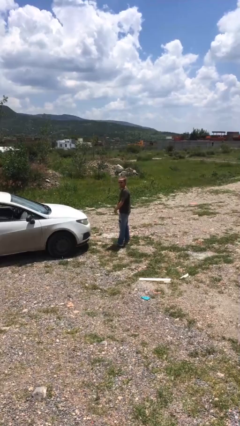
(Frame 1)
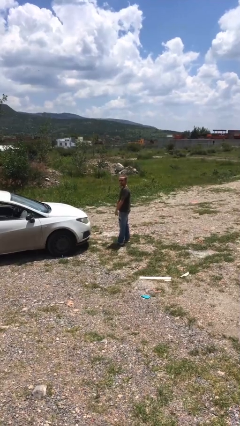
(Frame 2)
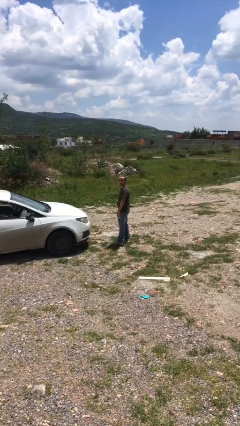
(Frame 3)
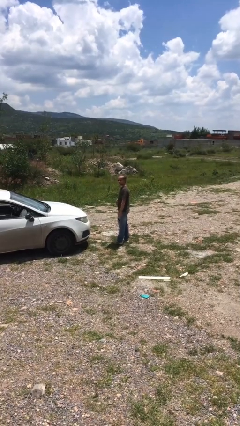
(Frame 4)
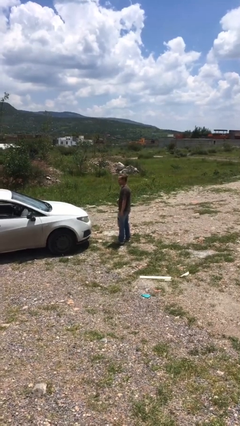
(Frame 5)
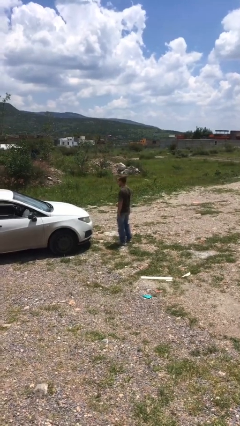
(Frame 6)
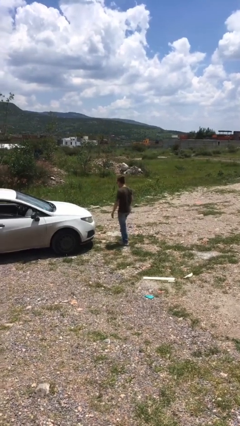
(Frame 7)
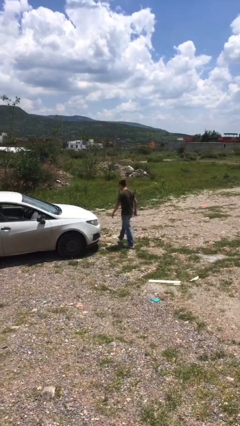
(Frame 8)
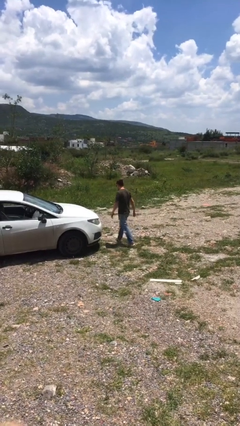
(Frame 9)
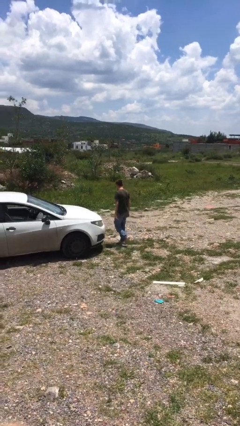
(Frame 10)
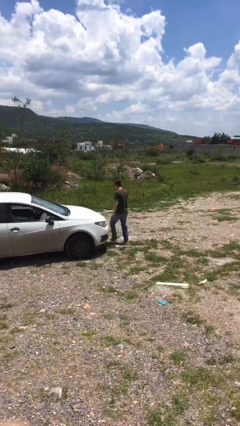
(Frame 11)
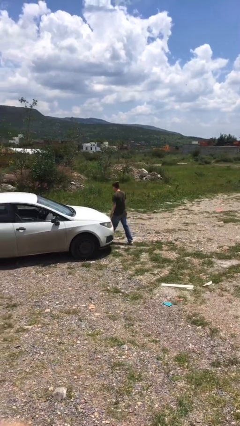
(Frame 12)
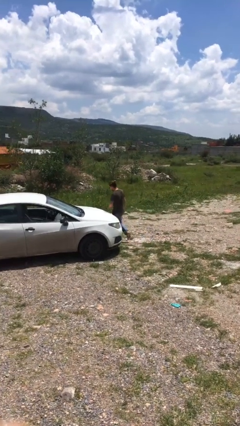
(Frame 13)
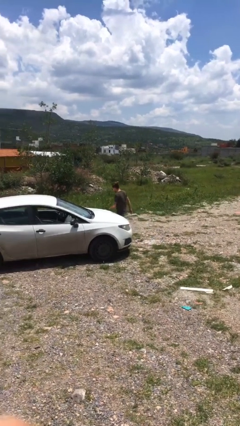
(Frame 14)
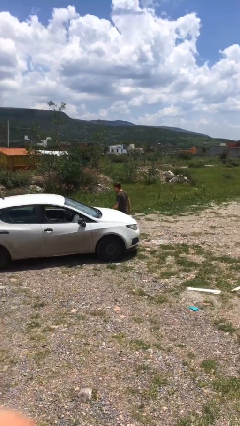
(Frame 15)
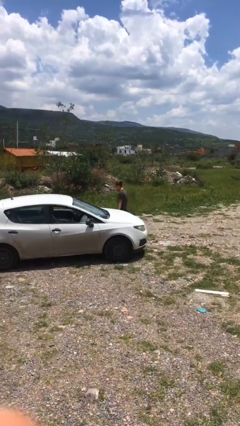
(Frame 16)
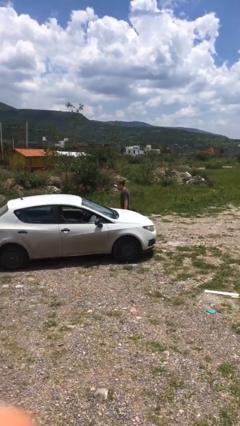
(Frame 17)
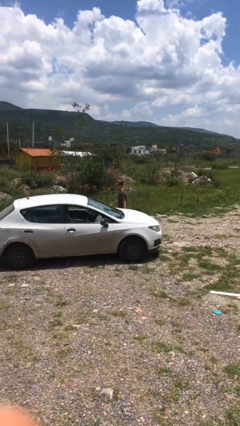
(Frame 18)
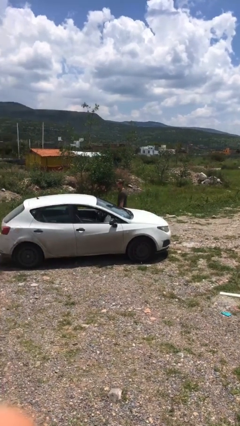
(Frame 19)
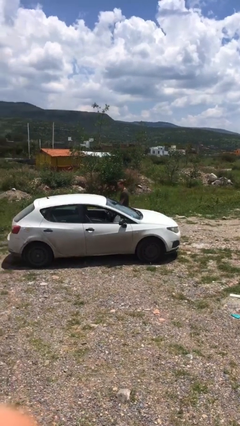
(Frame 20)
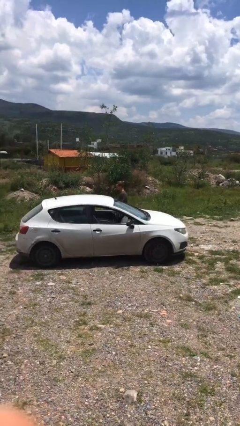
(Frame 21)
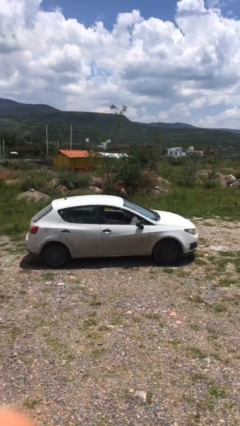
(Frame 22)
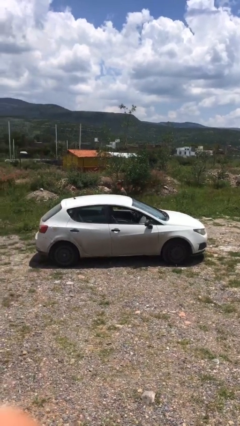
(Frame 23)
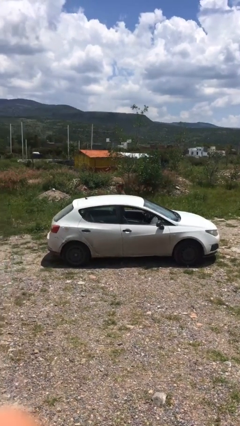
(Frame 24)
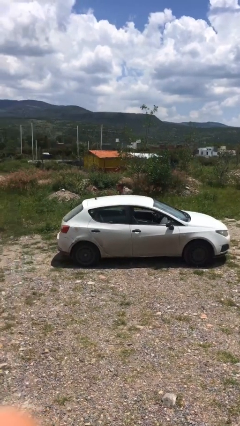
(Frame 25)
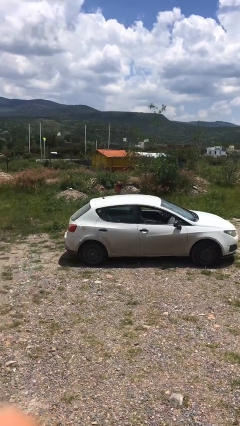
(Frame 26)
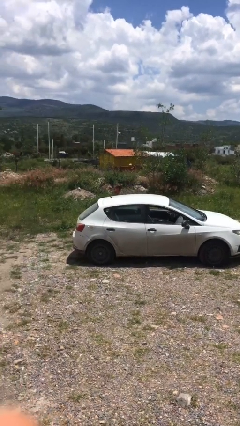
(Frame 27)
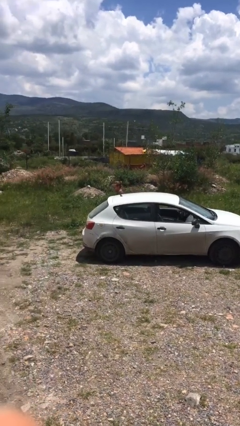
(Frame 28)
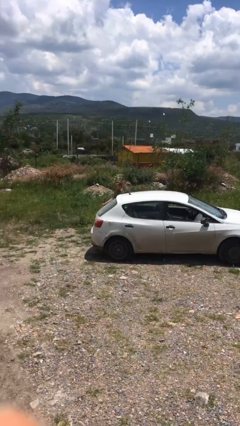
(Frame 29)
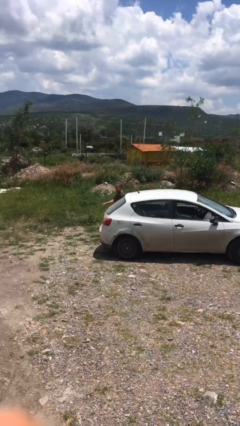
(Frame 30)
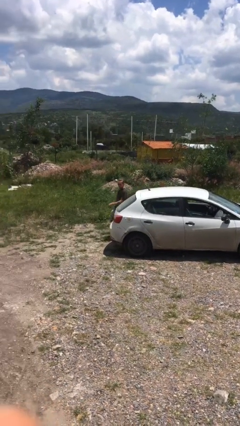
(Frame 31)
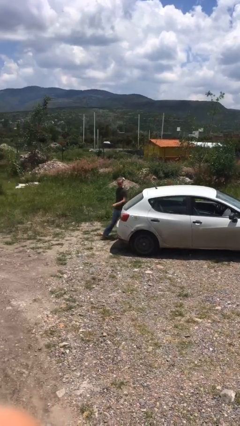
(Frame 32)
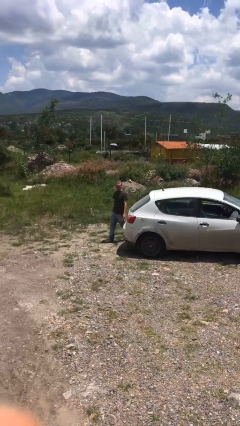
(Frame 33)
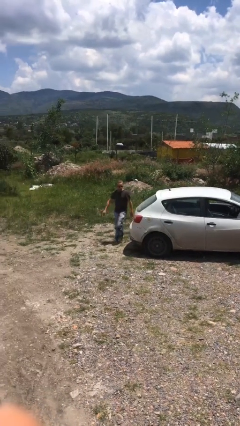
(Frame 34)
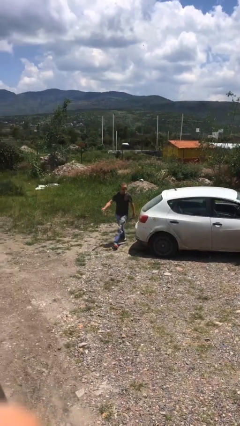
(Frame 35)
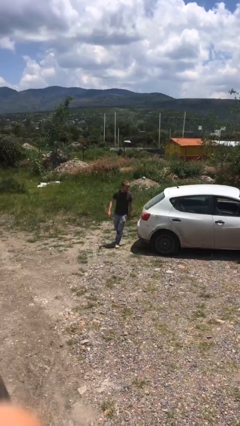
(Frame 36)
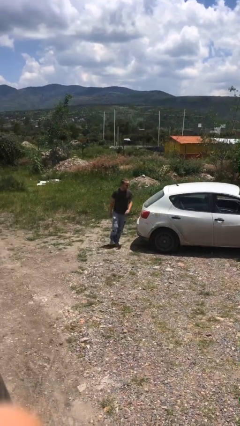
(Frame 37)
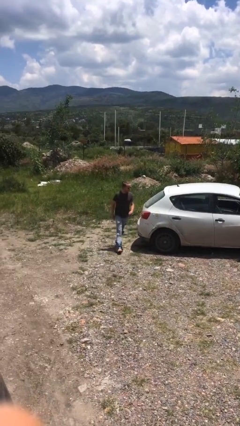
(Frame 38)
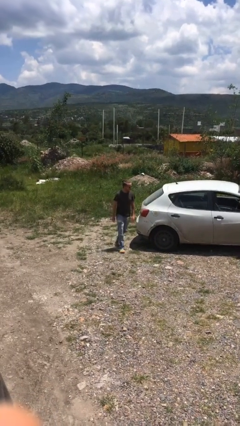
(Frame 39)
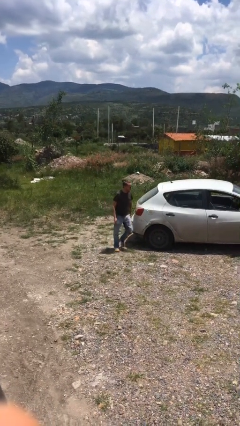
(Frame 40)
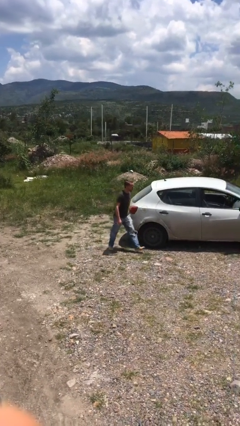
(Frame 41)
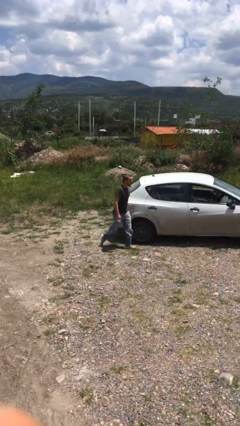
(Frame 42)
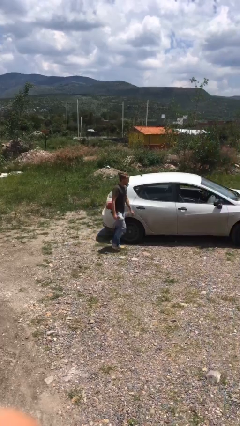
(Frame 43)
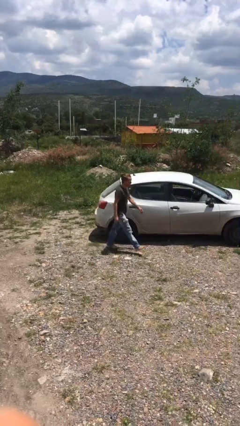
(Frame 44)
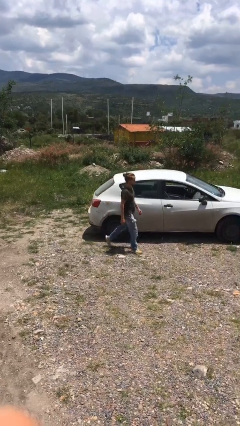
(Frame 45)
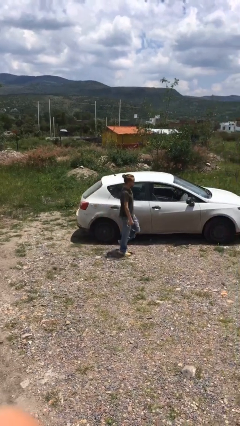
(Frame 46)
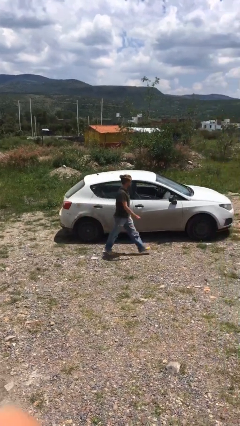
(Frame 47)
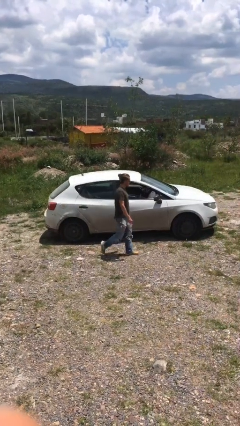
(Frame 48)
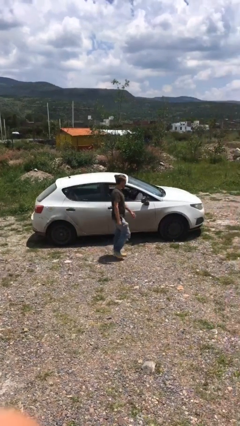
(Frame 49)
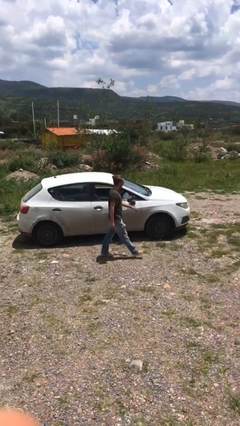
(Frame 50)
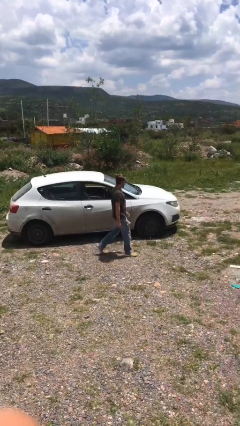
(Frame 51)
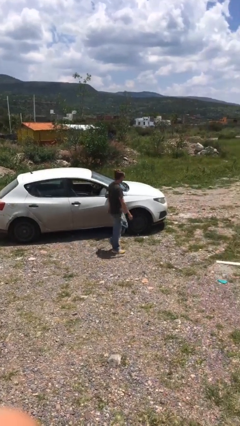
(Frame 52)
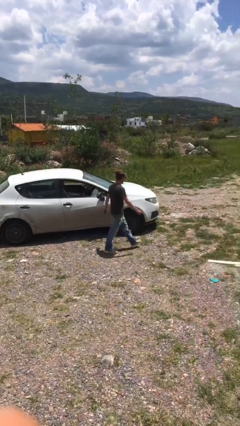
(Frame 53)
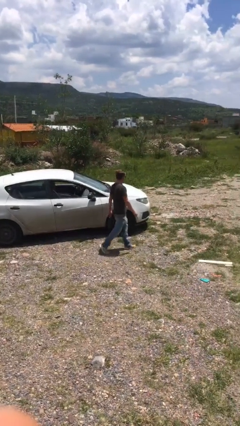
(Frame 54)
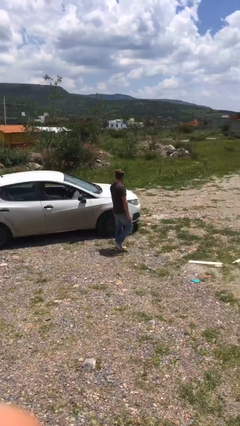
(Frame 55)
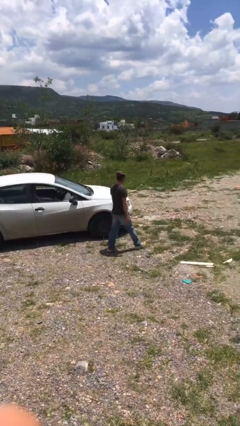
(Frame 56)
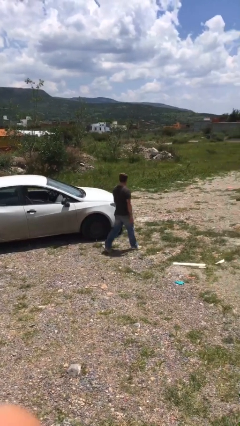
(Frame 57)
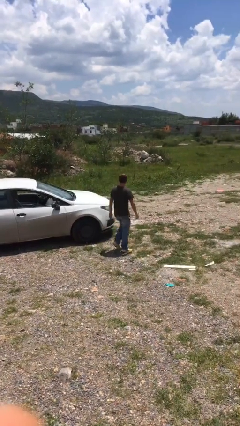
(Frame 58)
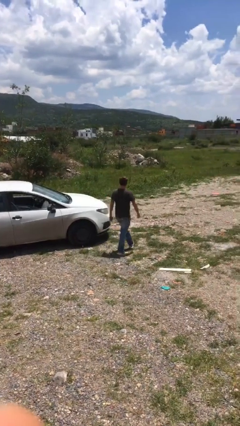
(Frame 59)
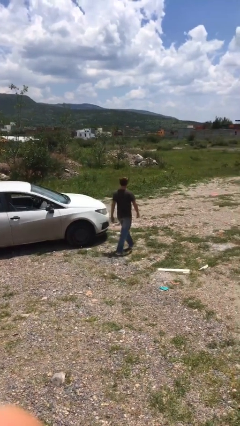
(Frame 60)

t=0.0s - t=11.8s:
person walks around car

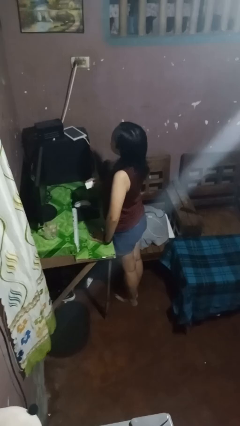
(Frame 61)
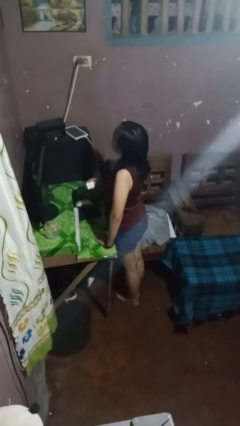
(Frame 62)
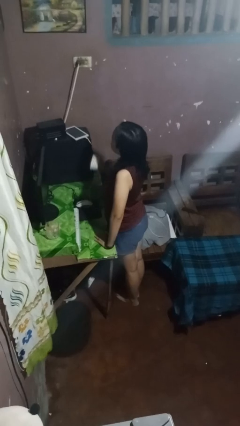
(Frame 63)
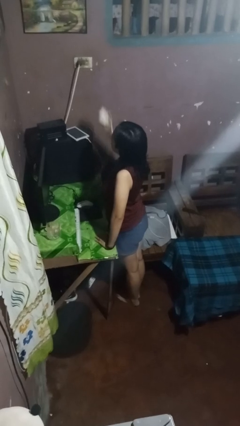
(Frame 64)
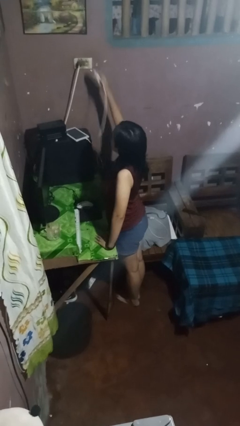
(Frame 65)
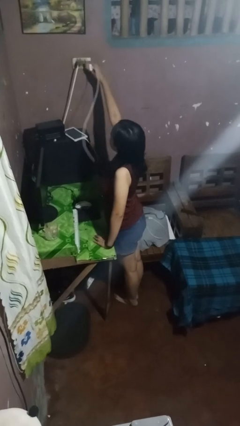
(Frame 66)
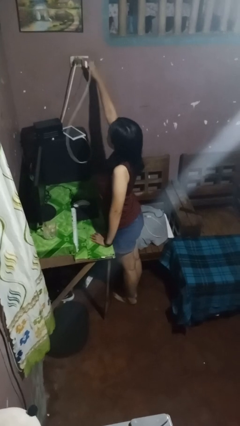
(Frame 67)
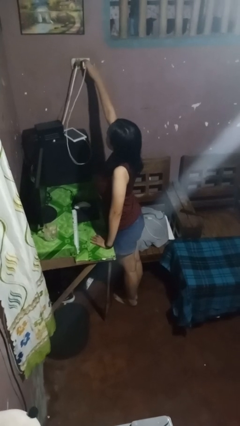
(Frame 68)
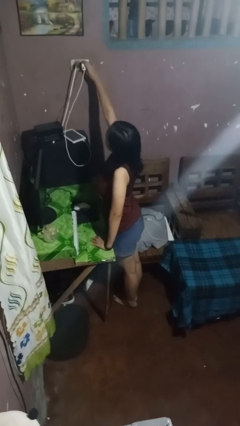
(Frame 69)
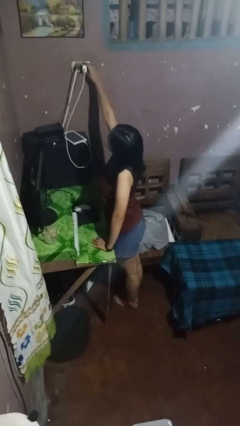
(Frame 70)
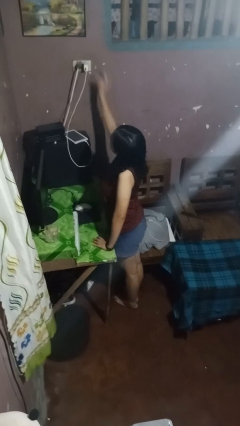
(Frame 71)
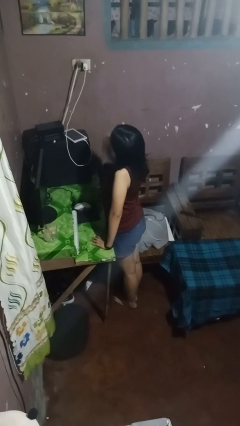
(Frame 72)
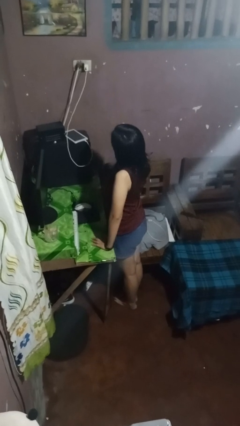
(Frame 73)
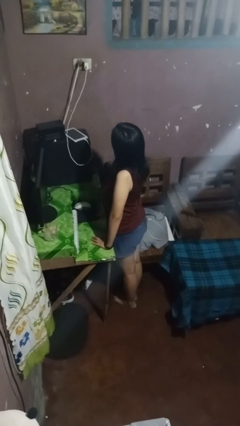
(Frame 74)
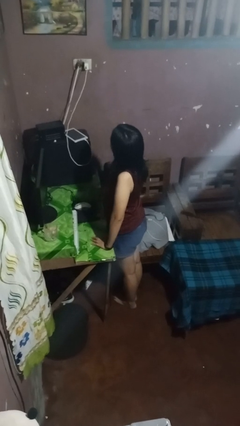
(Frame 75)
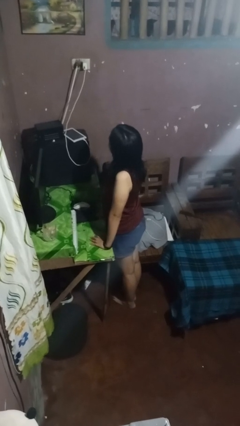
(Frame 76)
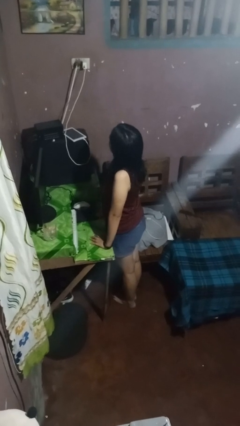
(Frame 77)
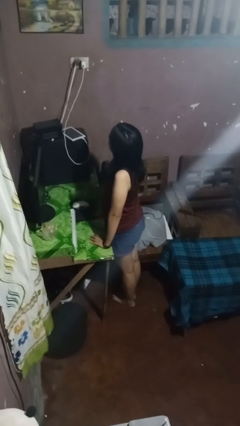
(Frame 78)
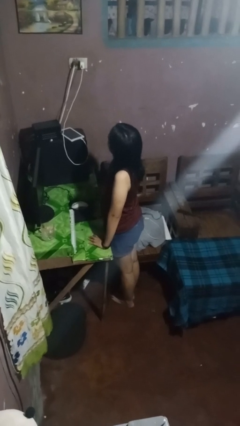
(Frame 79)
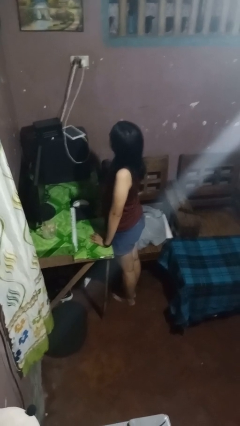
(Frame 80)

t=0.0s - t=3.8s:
person plugs into electrical socket

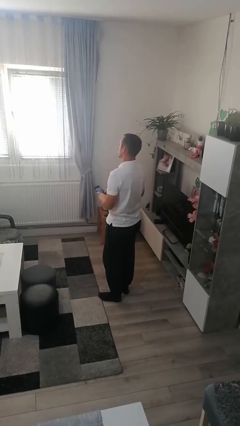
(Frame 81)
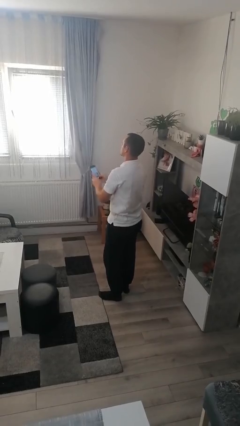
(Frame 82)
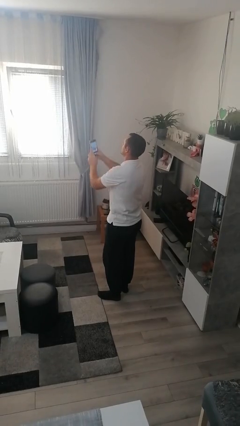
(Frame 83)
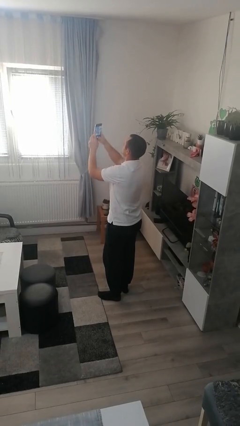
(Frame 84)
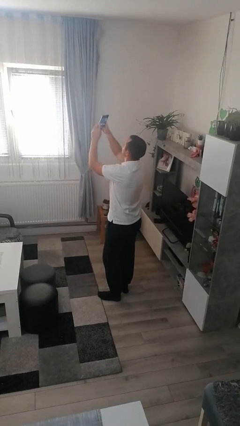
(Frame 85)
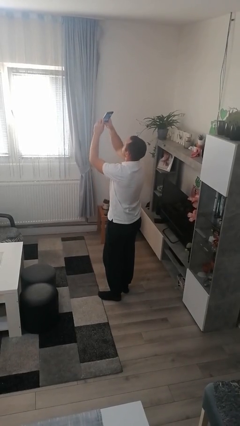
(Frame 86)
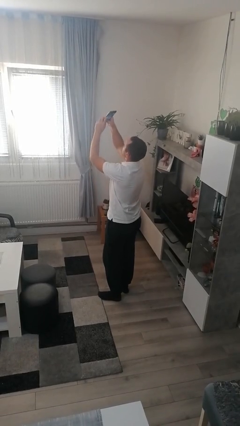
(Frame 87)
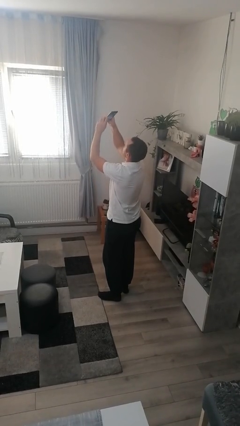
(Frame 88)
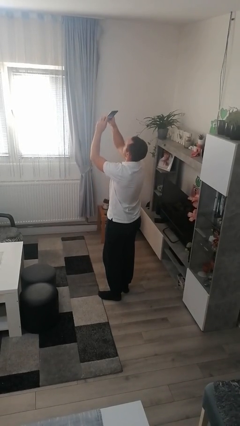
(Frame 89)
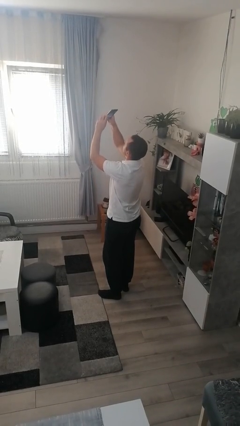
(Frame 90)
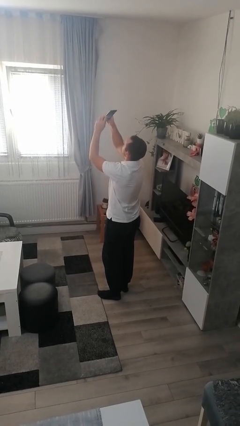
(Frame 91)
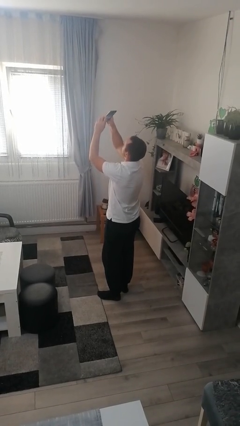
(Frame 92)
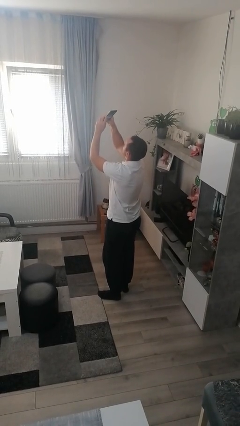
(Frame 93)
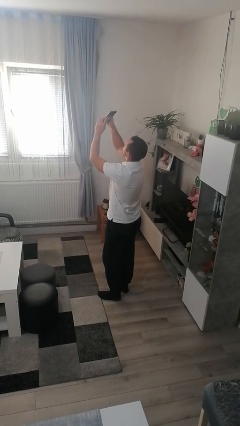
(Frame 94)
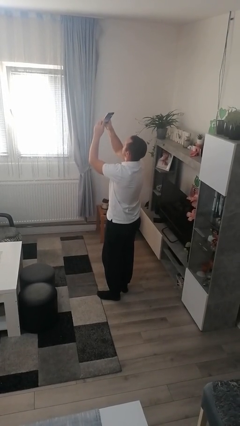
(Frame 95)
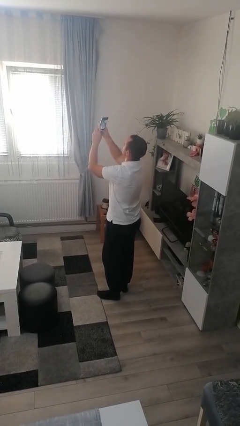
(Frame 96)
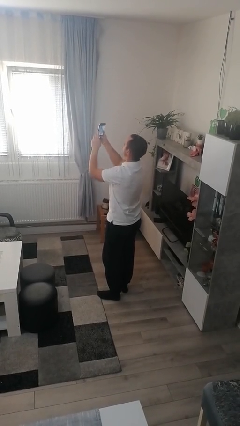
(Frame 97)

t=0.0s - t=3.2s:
person takes selfie
